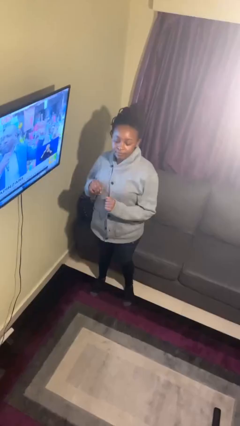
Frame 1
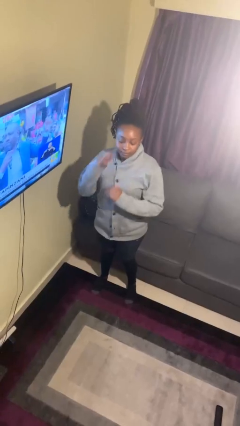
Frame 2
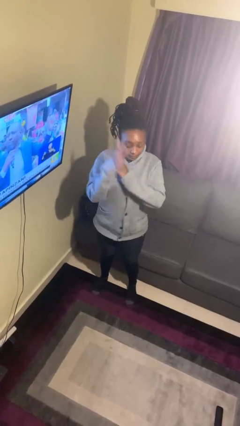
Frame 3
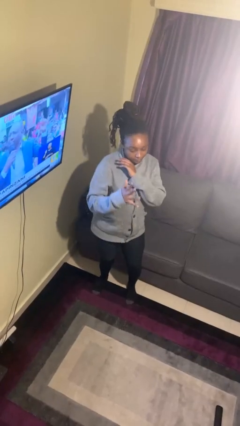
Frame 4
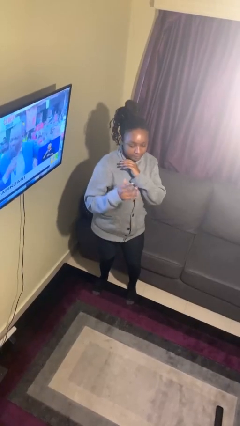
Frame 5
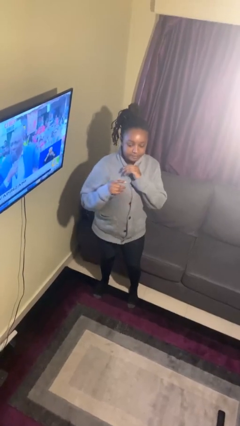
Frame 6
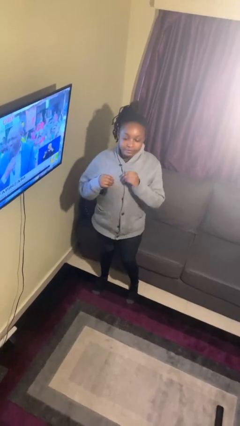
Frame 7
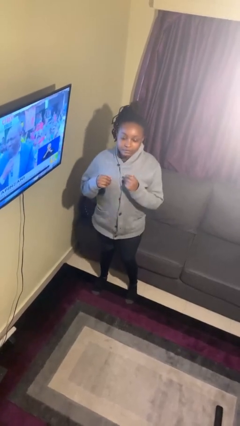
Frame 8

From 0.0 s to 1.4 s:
person karate chop

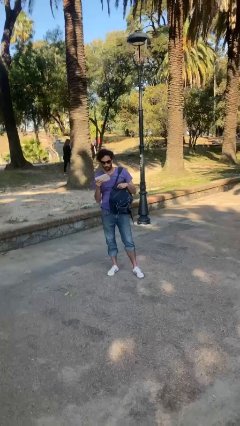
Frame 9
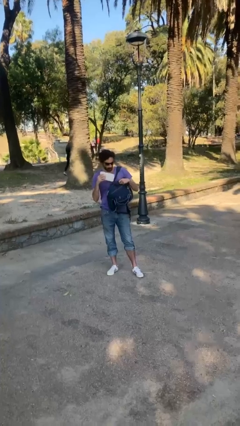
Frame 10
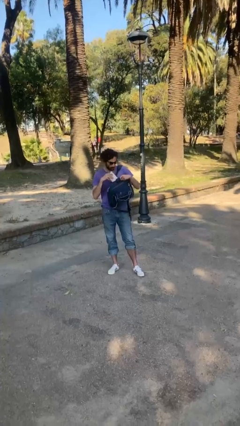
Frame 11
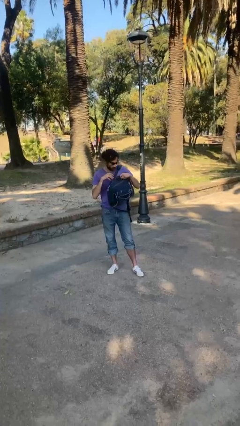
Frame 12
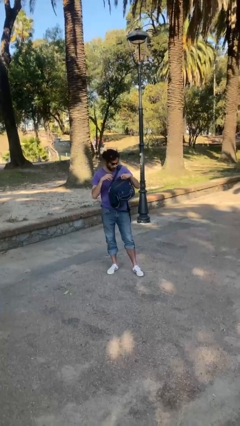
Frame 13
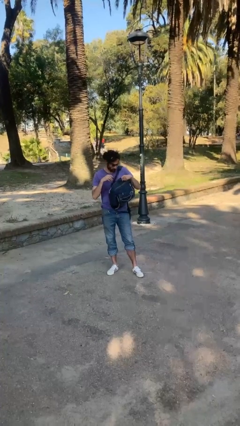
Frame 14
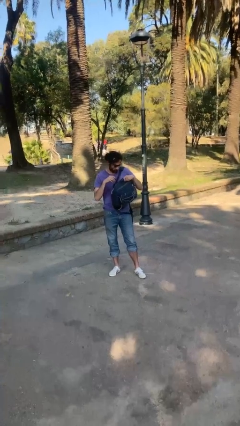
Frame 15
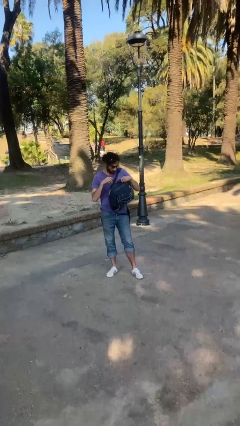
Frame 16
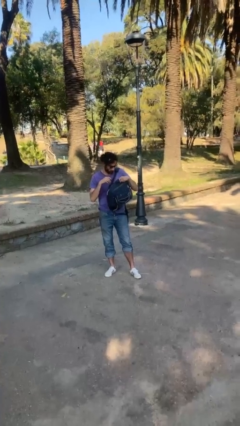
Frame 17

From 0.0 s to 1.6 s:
person puts object into backpack

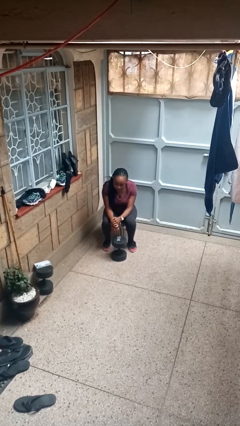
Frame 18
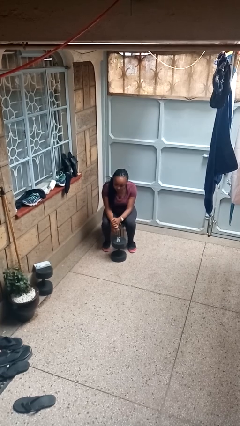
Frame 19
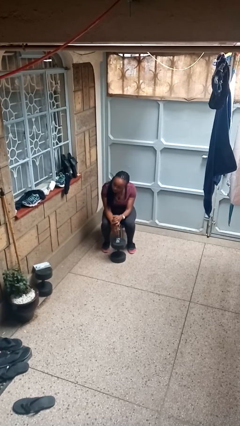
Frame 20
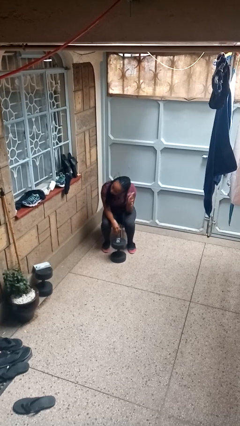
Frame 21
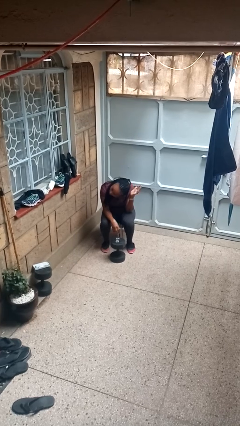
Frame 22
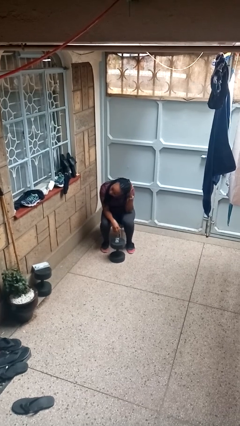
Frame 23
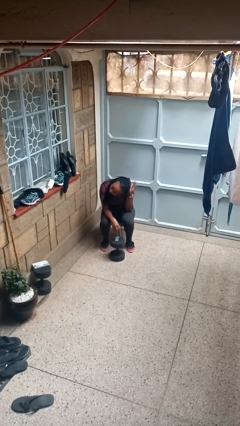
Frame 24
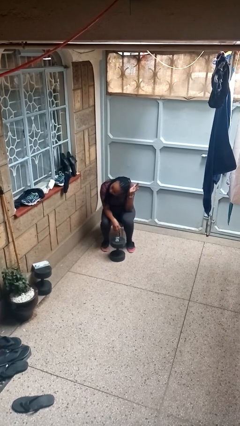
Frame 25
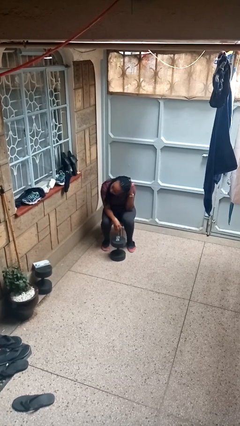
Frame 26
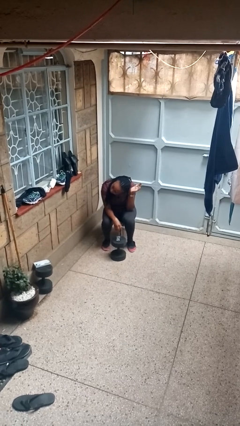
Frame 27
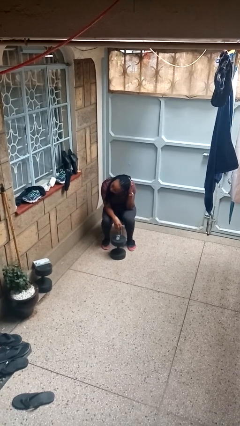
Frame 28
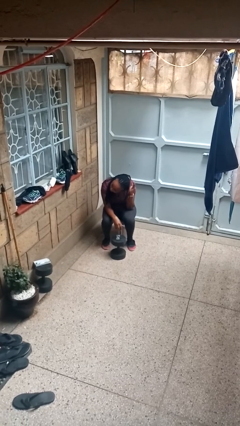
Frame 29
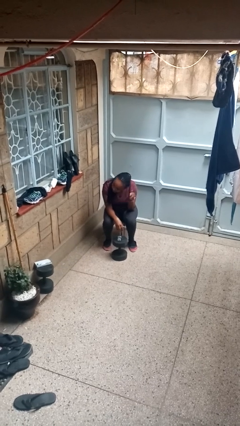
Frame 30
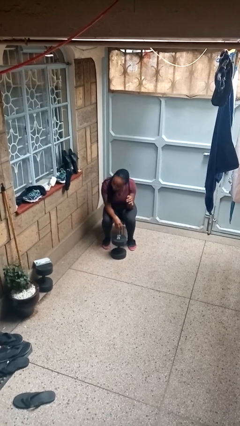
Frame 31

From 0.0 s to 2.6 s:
person pats head

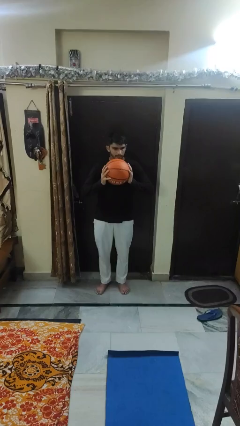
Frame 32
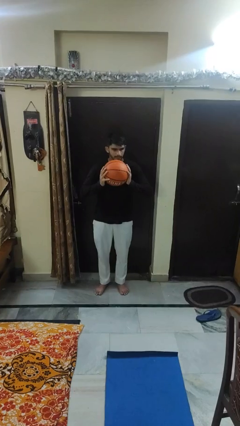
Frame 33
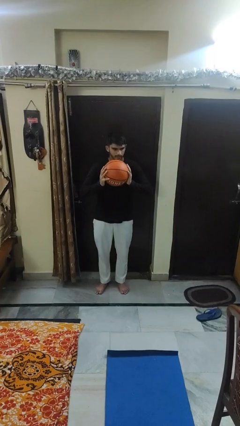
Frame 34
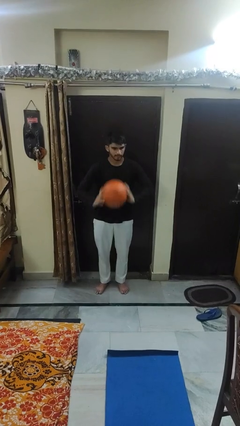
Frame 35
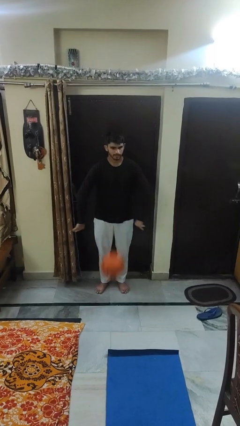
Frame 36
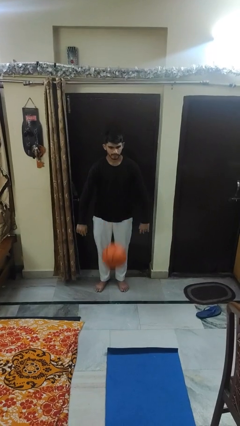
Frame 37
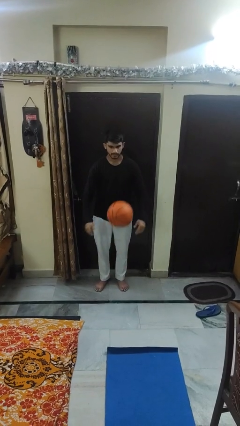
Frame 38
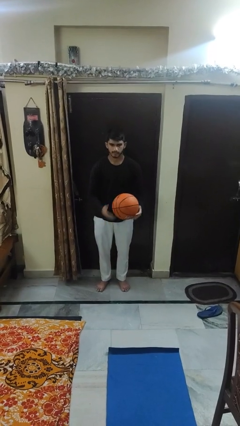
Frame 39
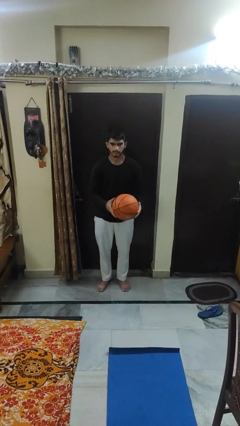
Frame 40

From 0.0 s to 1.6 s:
person bounces ball on floor

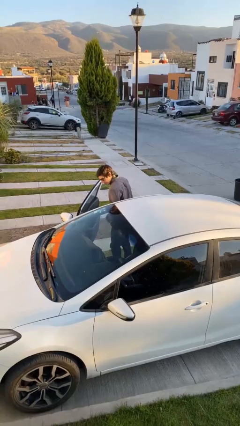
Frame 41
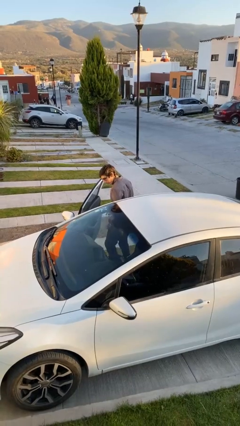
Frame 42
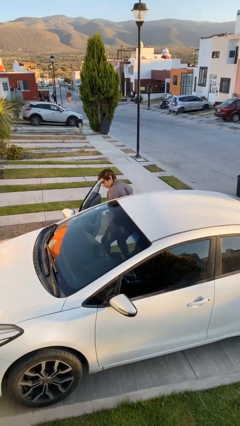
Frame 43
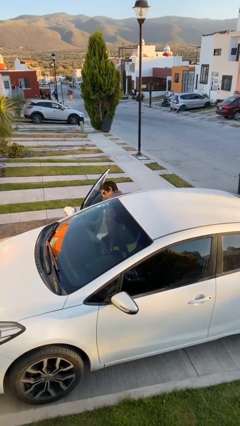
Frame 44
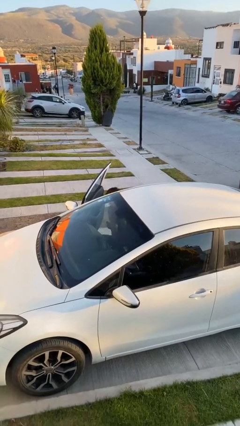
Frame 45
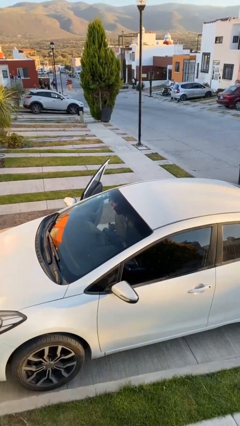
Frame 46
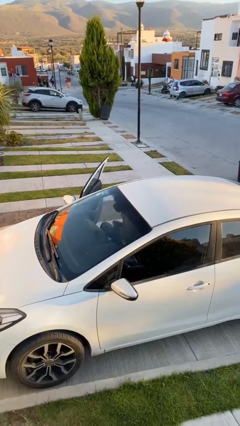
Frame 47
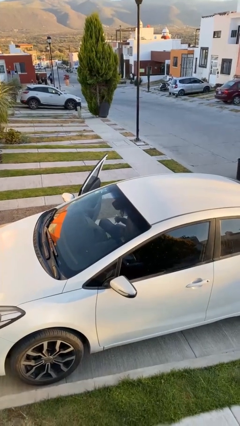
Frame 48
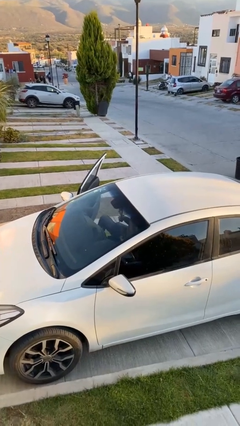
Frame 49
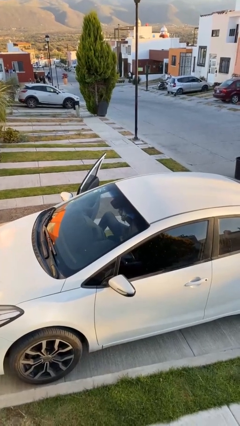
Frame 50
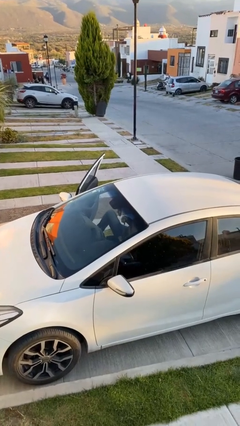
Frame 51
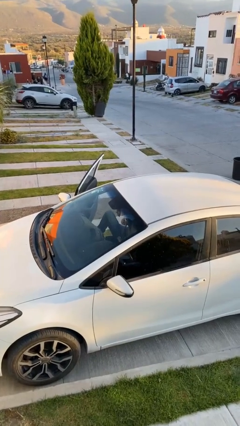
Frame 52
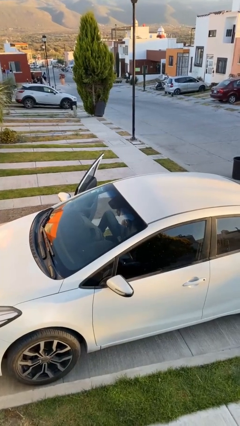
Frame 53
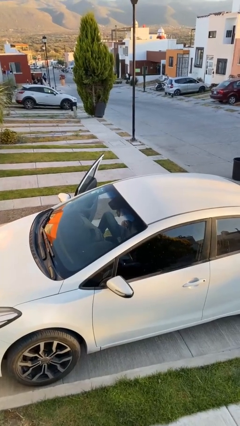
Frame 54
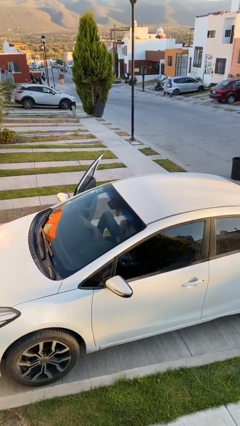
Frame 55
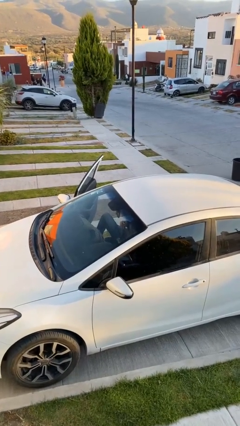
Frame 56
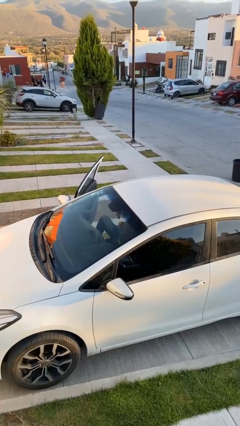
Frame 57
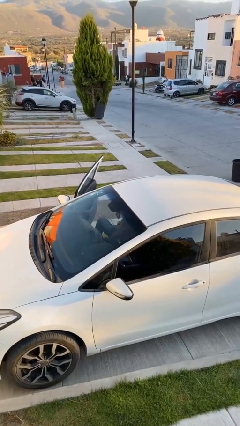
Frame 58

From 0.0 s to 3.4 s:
person enters car

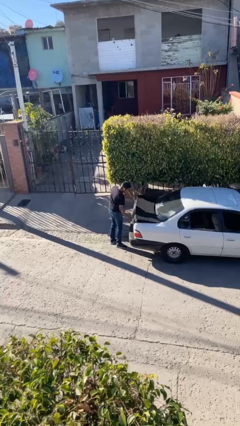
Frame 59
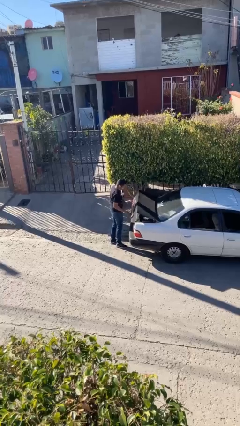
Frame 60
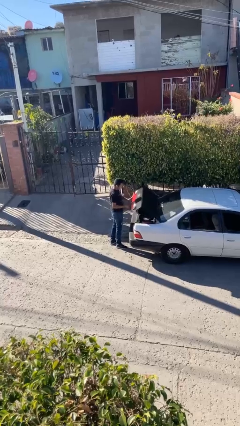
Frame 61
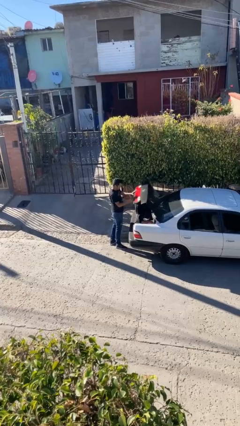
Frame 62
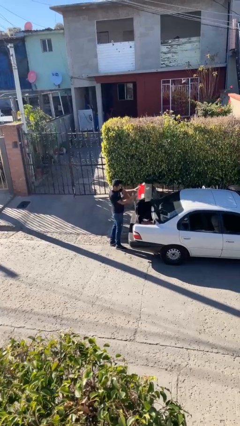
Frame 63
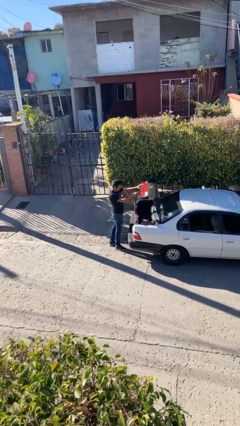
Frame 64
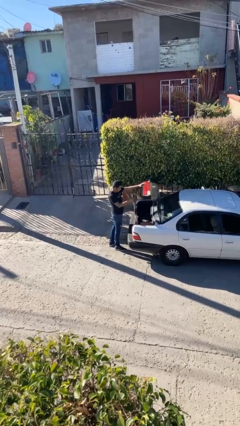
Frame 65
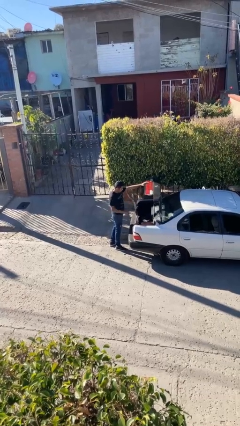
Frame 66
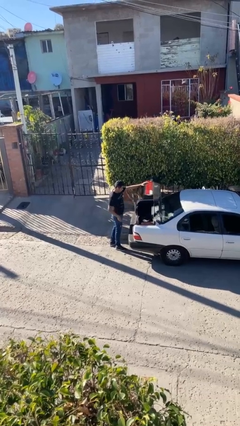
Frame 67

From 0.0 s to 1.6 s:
person opens car trunk

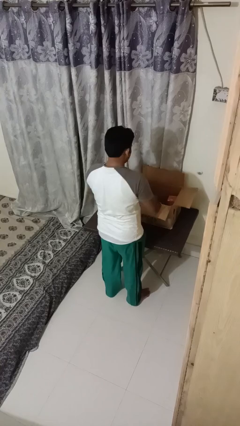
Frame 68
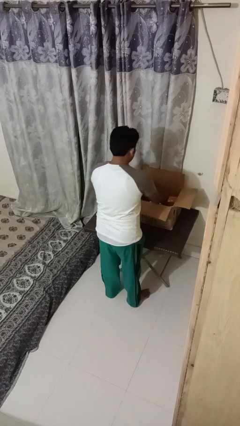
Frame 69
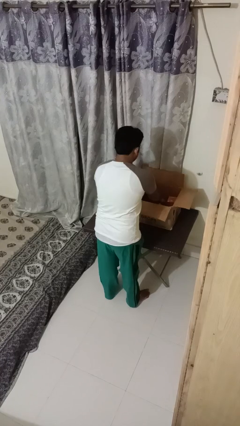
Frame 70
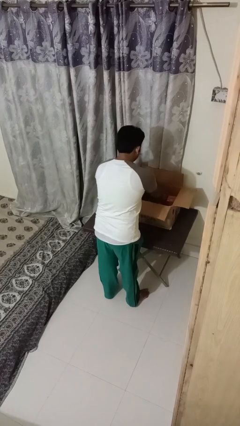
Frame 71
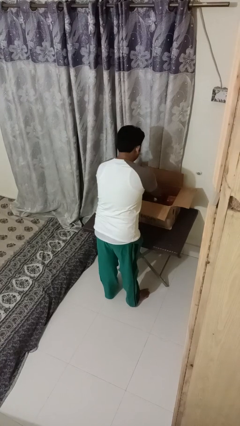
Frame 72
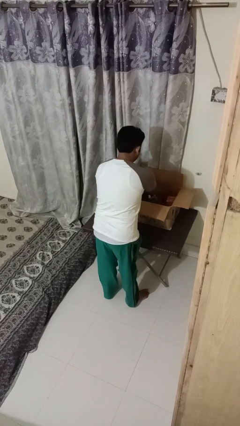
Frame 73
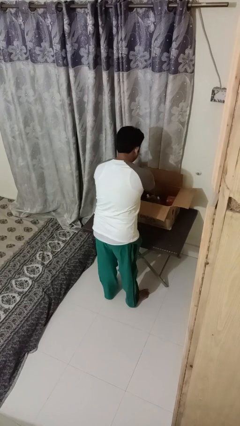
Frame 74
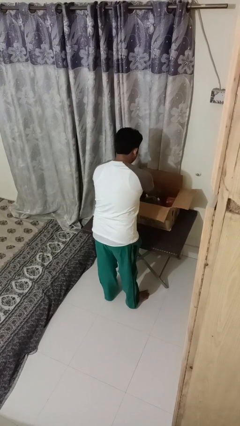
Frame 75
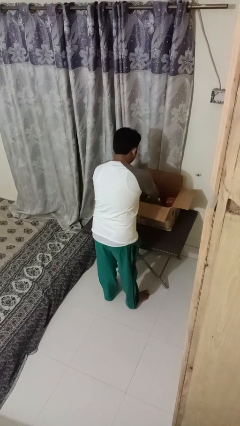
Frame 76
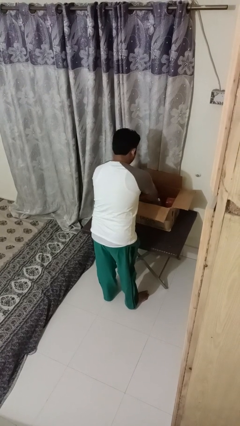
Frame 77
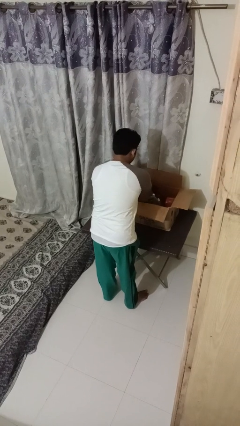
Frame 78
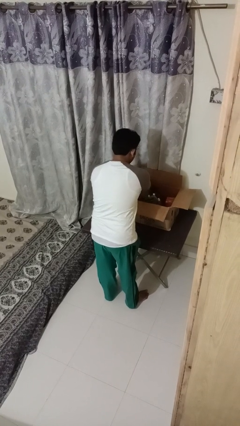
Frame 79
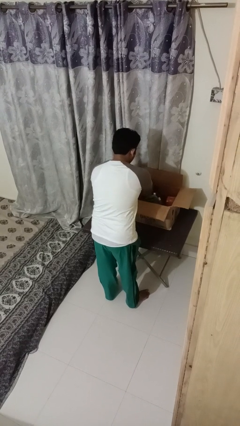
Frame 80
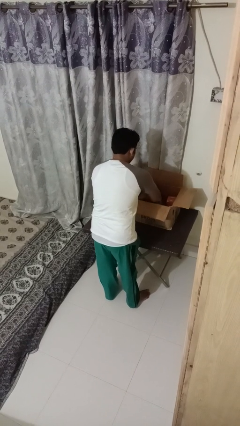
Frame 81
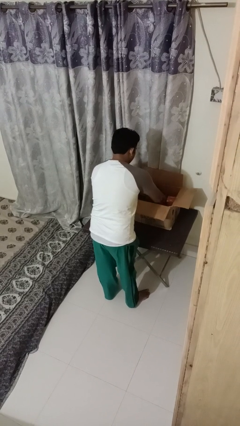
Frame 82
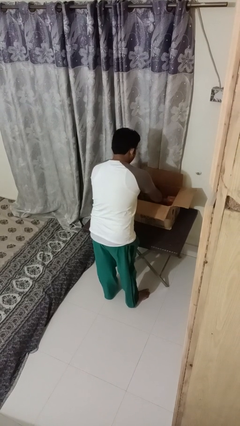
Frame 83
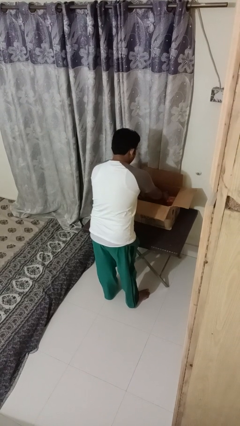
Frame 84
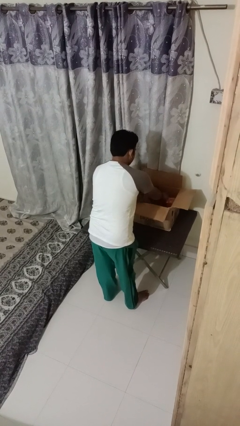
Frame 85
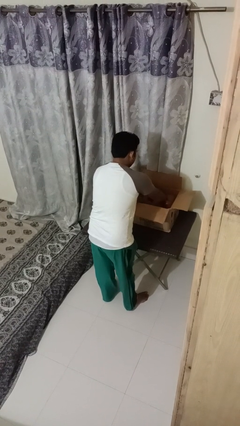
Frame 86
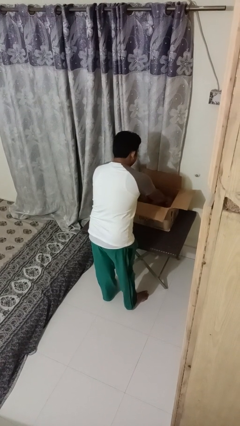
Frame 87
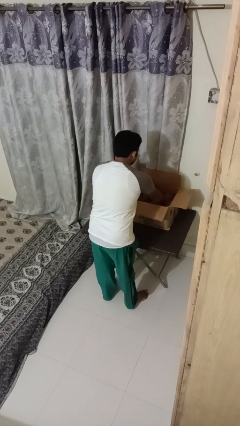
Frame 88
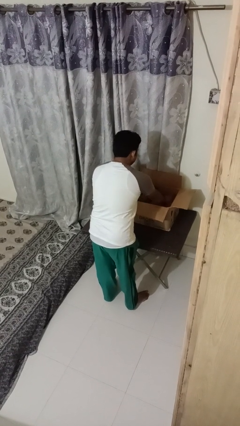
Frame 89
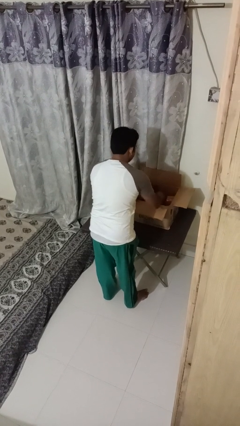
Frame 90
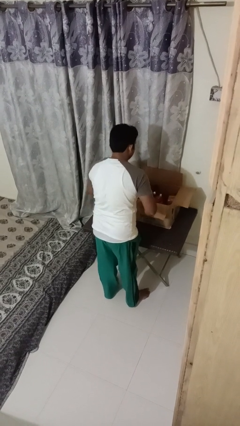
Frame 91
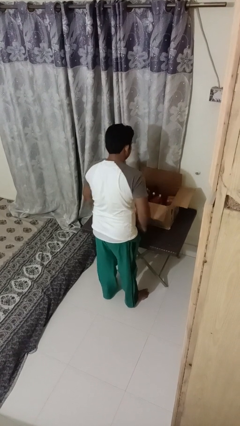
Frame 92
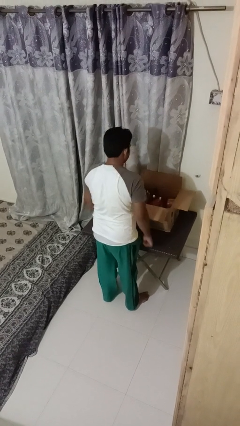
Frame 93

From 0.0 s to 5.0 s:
person searches in box
